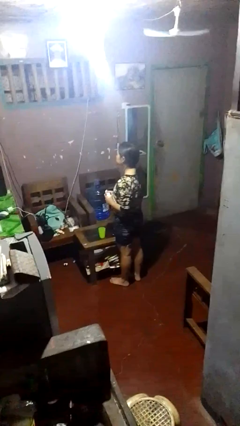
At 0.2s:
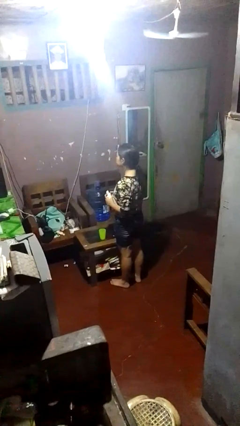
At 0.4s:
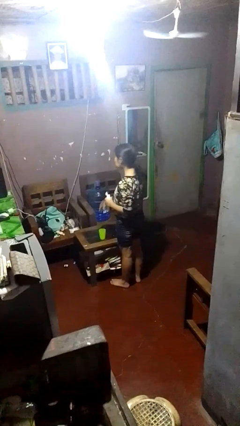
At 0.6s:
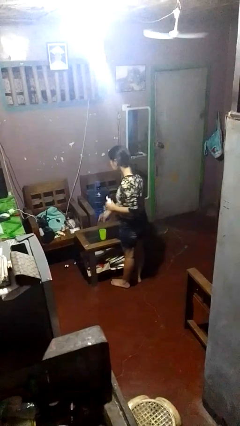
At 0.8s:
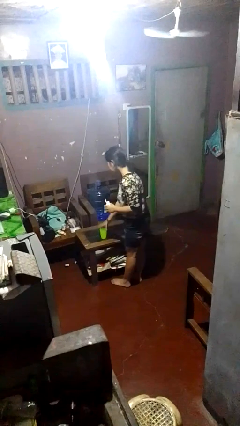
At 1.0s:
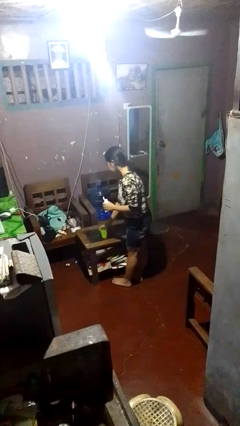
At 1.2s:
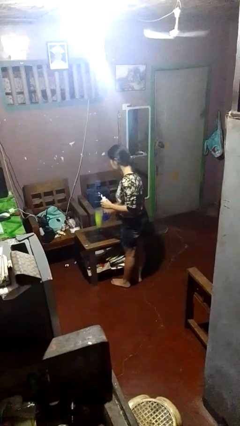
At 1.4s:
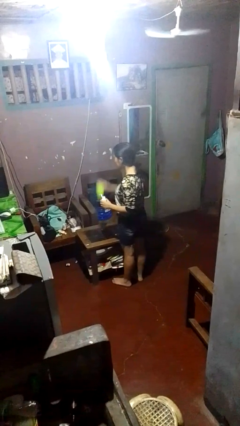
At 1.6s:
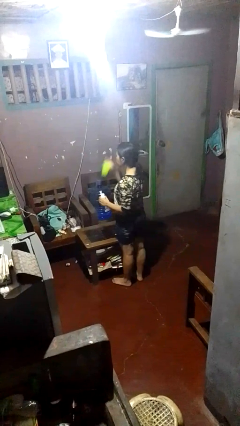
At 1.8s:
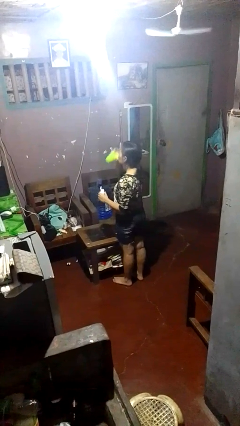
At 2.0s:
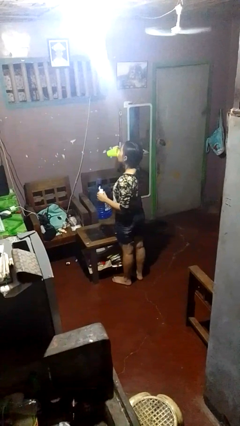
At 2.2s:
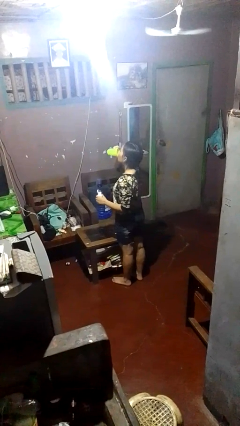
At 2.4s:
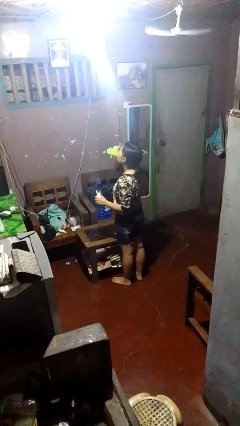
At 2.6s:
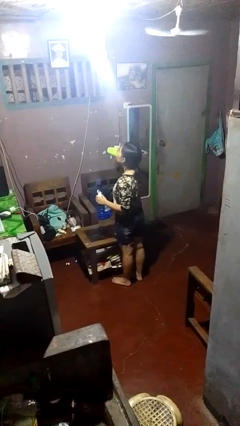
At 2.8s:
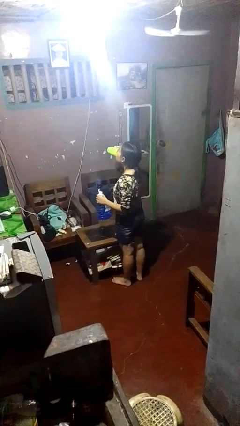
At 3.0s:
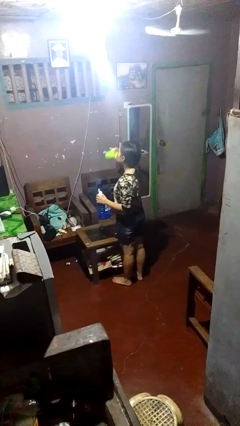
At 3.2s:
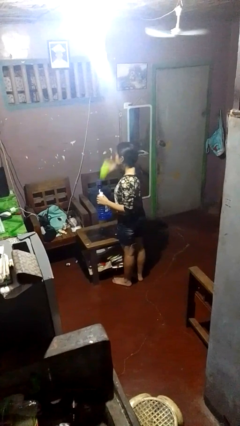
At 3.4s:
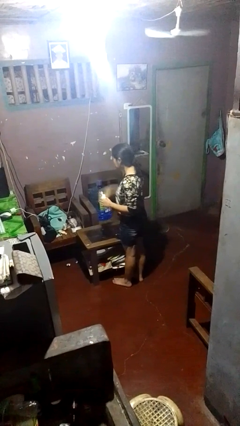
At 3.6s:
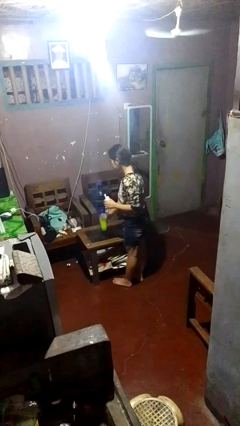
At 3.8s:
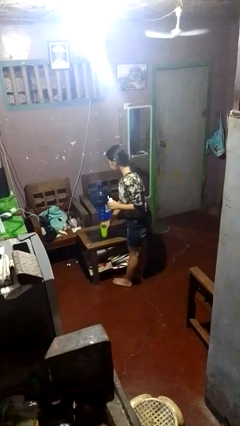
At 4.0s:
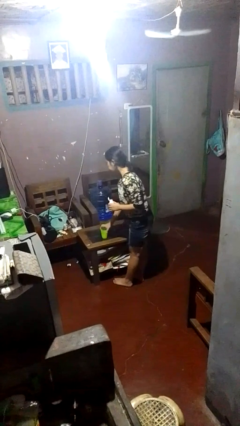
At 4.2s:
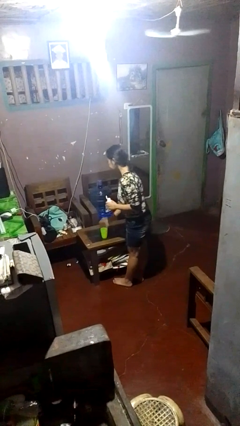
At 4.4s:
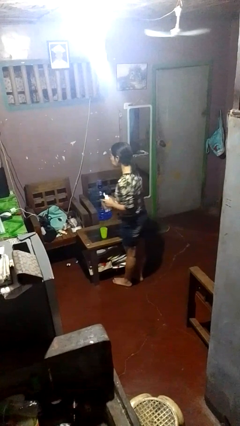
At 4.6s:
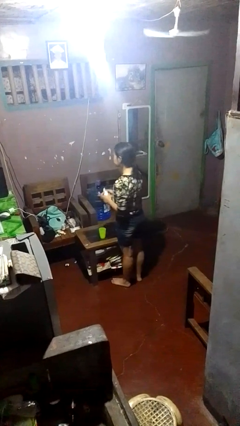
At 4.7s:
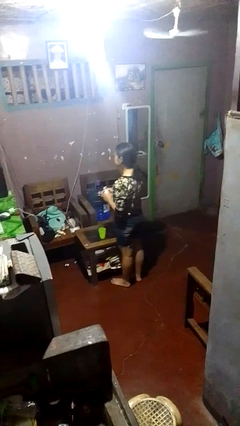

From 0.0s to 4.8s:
person drinks from cup

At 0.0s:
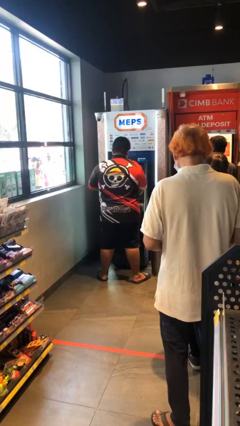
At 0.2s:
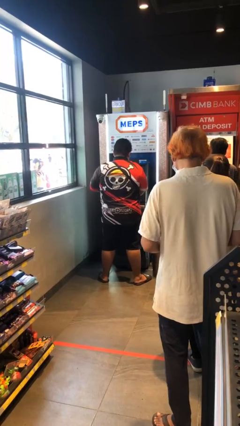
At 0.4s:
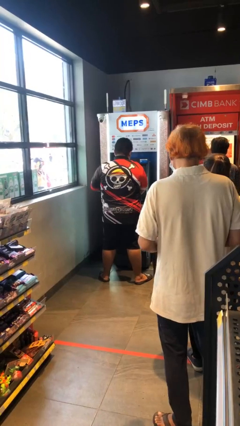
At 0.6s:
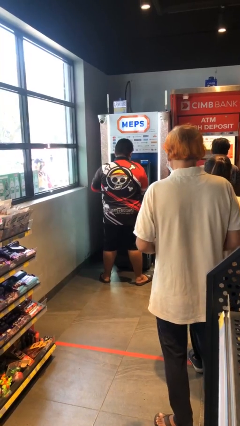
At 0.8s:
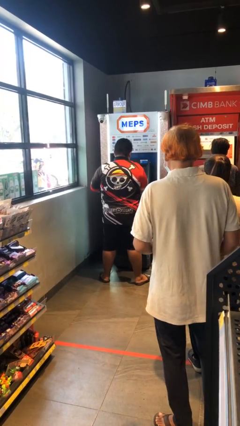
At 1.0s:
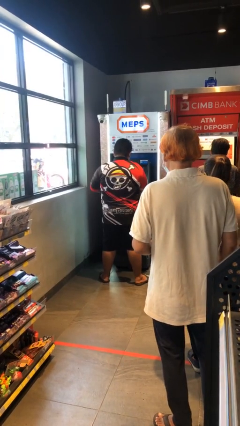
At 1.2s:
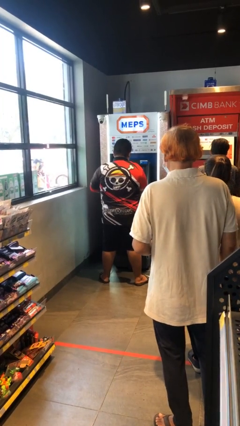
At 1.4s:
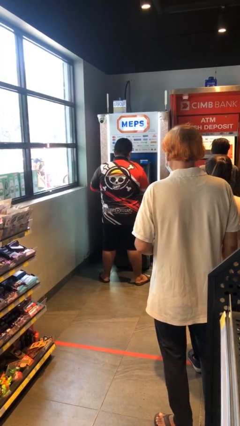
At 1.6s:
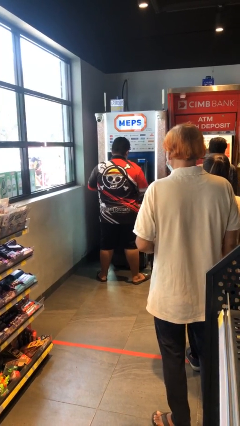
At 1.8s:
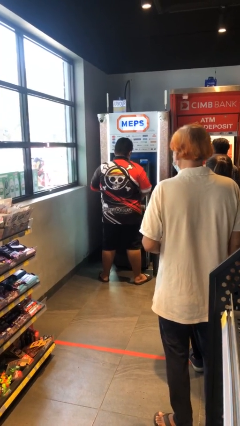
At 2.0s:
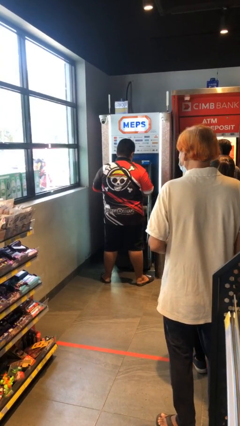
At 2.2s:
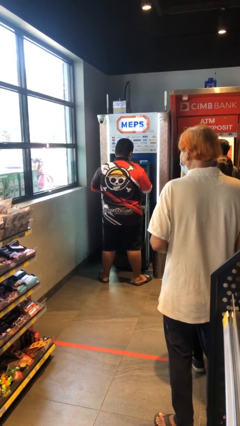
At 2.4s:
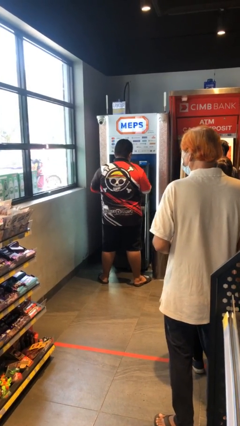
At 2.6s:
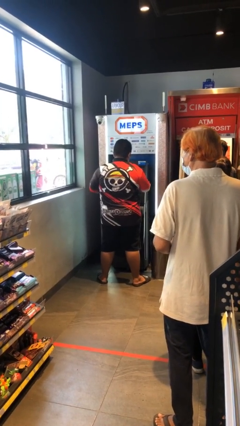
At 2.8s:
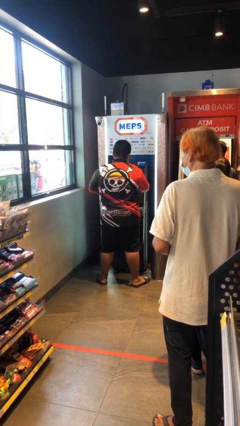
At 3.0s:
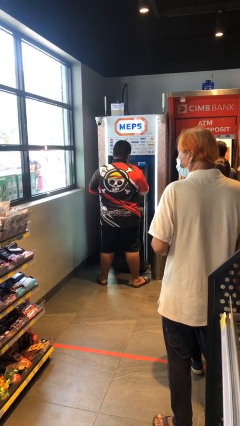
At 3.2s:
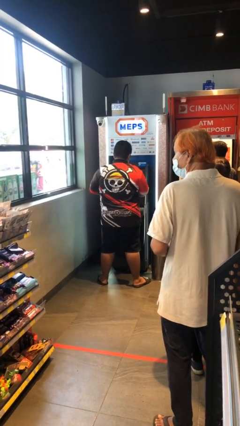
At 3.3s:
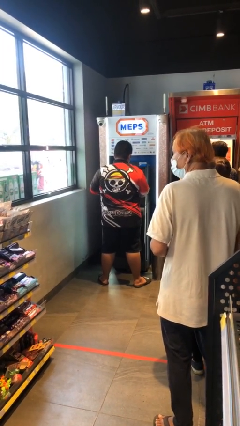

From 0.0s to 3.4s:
person purchases from machine

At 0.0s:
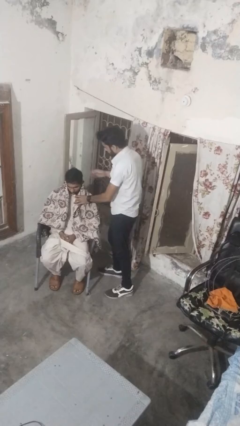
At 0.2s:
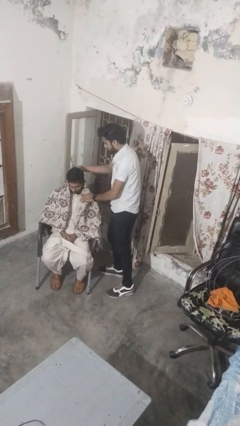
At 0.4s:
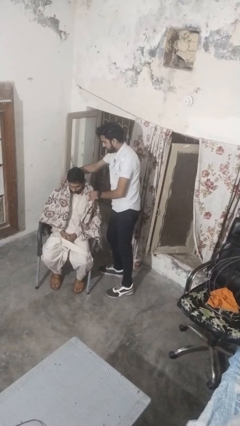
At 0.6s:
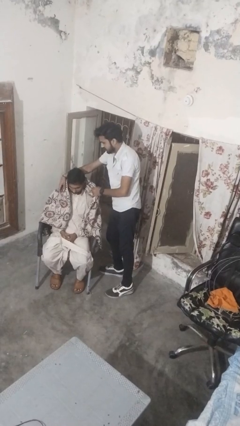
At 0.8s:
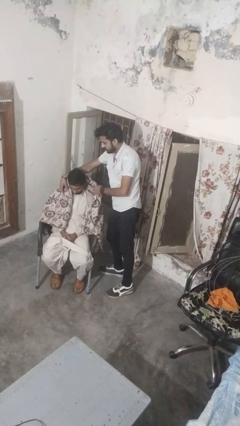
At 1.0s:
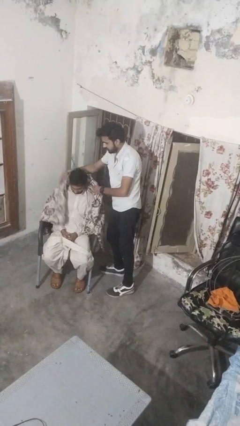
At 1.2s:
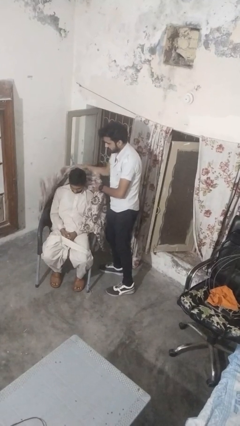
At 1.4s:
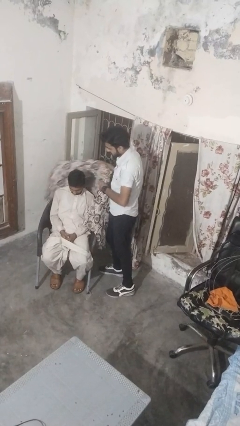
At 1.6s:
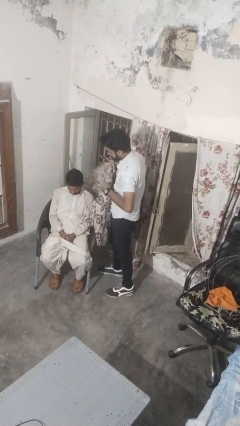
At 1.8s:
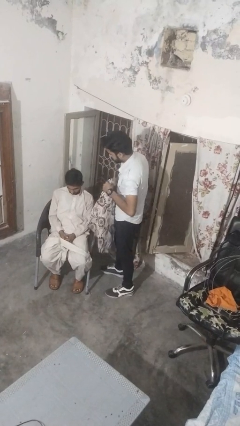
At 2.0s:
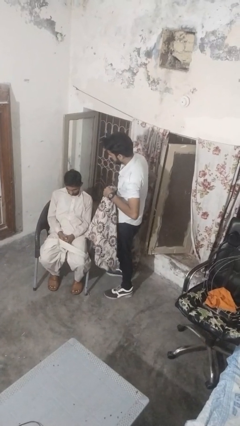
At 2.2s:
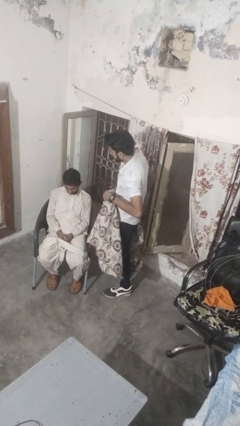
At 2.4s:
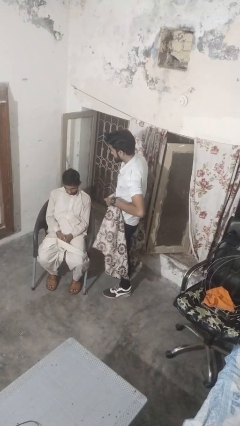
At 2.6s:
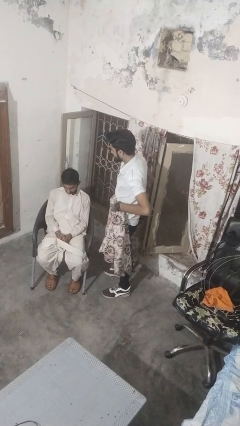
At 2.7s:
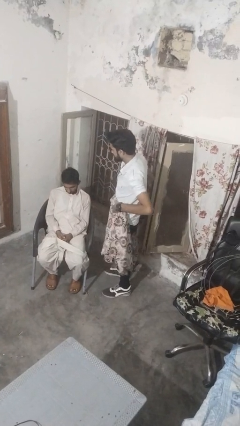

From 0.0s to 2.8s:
person uncovers friend with blanket

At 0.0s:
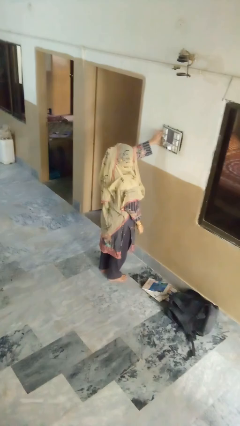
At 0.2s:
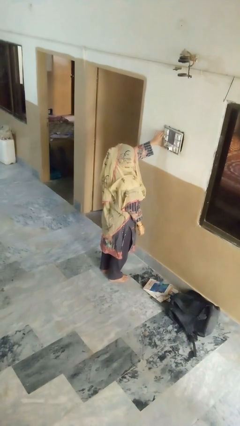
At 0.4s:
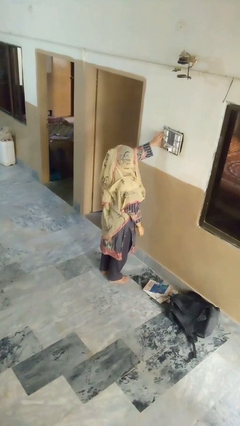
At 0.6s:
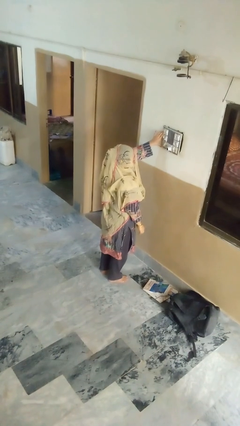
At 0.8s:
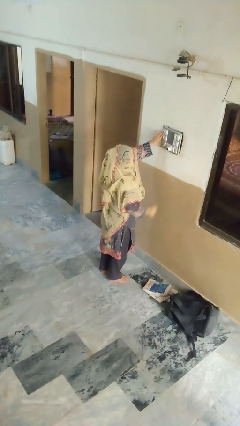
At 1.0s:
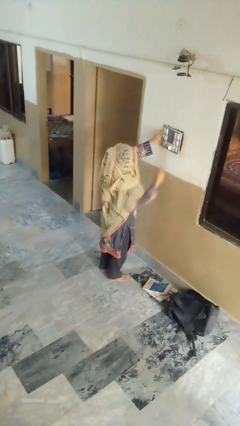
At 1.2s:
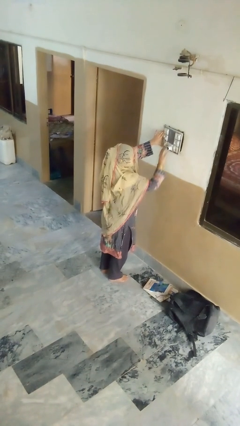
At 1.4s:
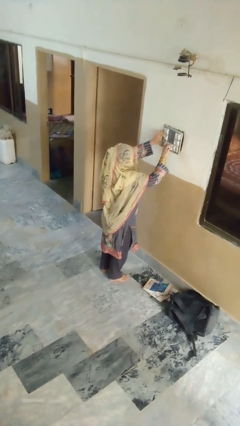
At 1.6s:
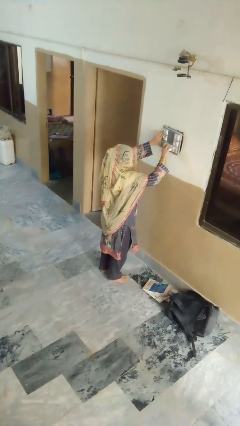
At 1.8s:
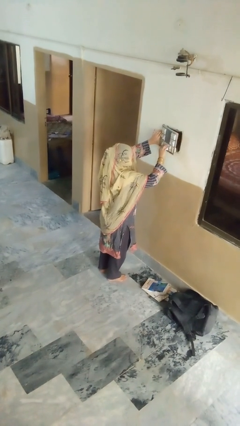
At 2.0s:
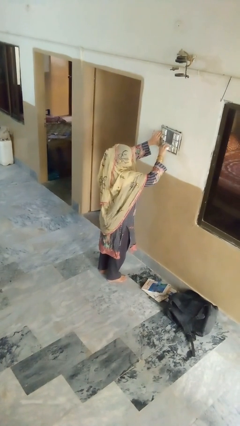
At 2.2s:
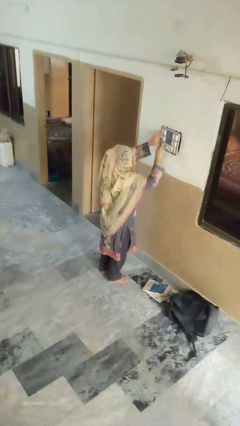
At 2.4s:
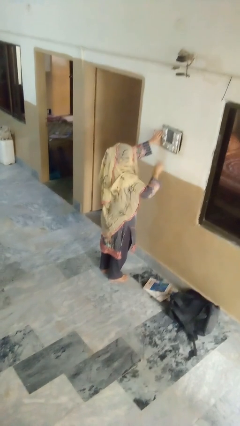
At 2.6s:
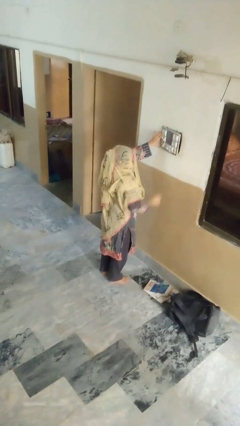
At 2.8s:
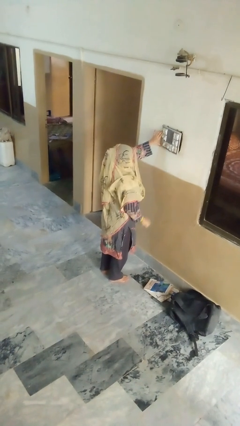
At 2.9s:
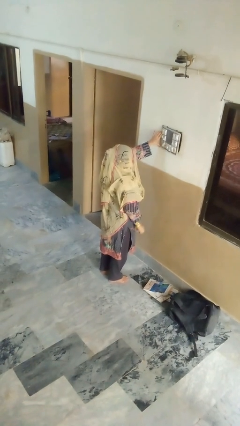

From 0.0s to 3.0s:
person unplugs from electrical socket

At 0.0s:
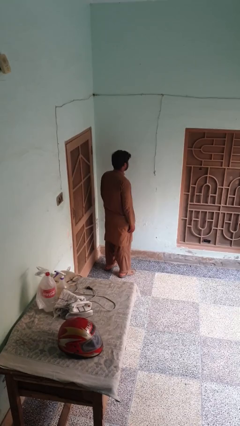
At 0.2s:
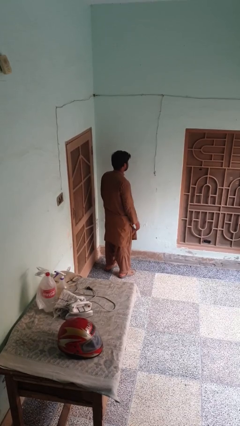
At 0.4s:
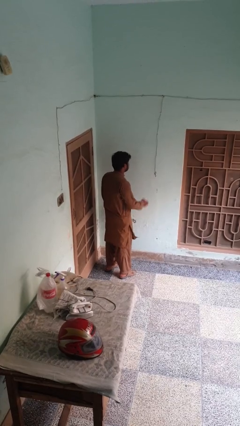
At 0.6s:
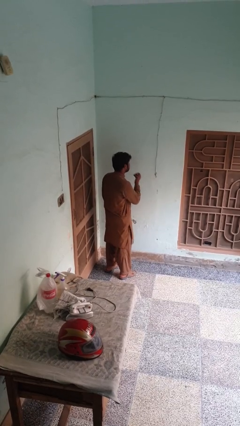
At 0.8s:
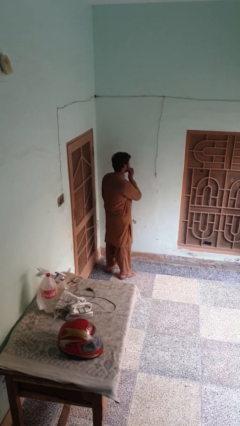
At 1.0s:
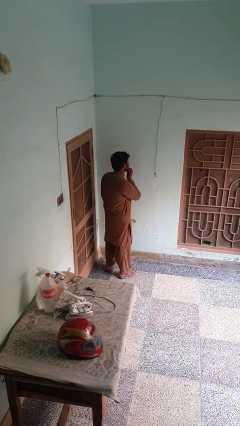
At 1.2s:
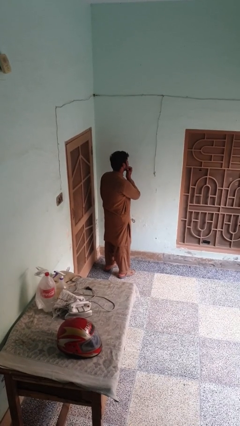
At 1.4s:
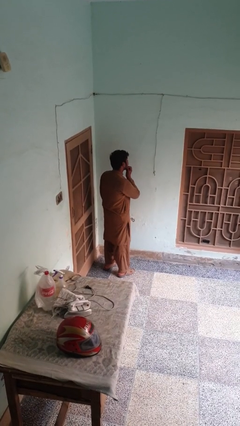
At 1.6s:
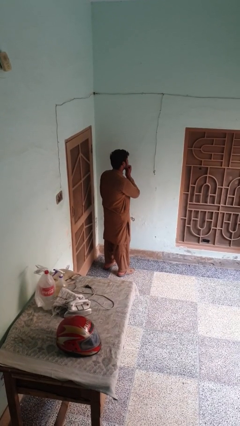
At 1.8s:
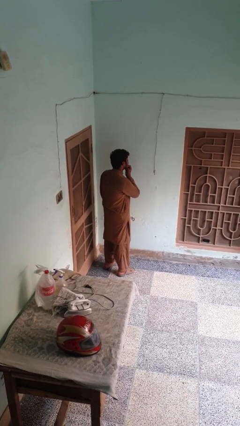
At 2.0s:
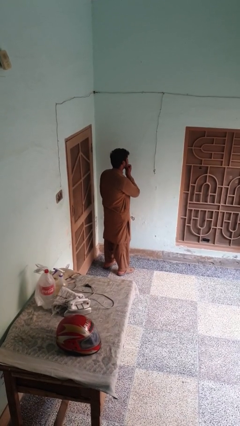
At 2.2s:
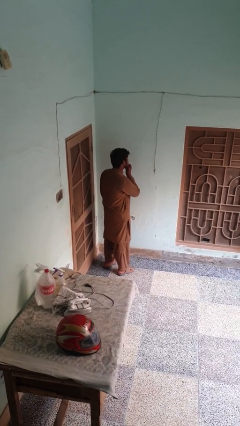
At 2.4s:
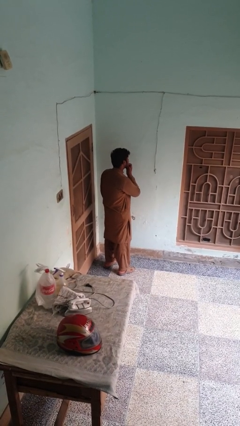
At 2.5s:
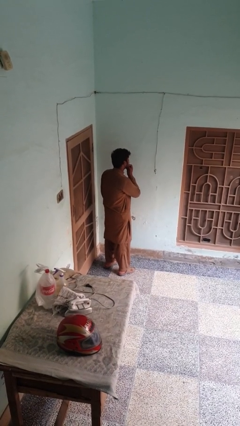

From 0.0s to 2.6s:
person strokes chin

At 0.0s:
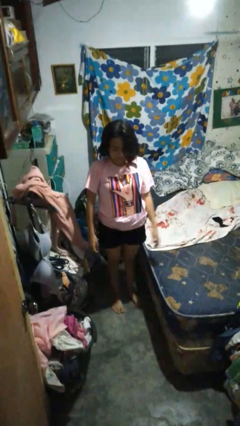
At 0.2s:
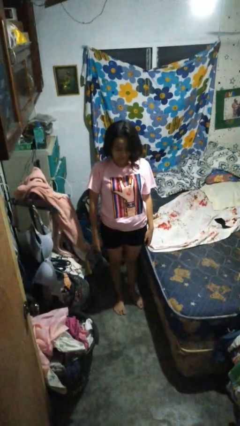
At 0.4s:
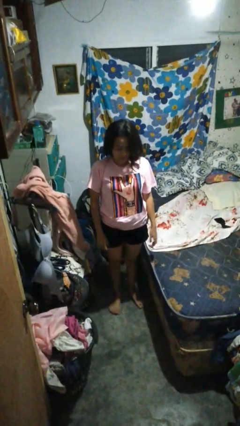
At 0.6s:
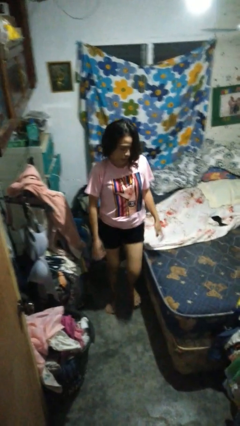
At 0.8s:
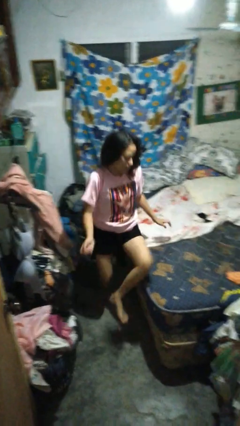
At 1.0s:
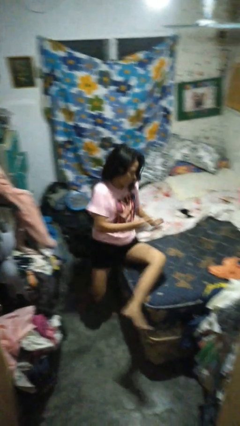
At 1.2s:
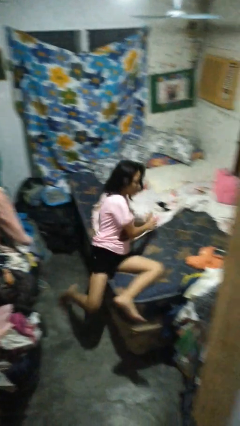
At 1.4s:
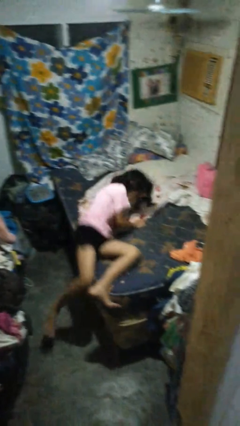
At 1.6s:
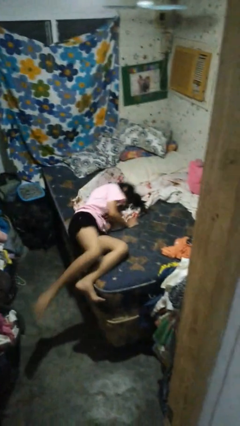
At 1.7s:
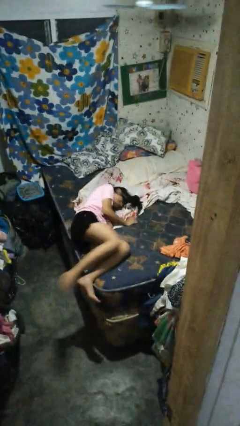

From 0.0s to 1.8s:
person lies down on bed
